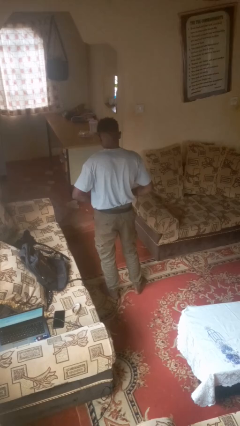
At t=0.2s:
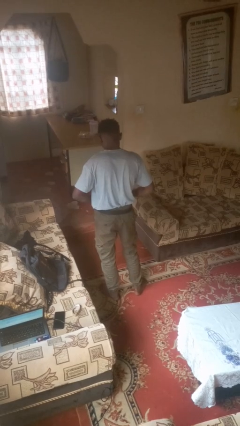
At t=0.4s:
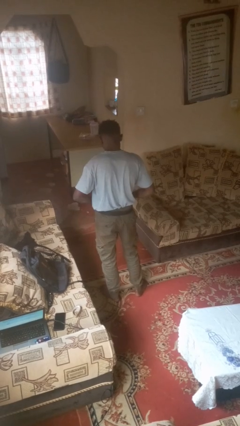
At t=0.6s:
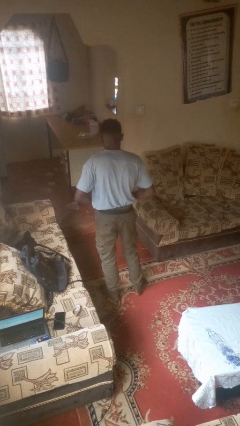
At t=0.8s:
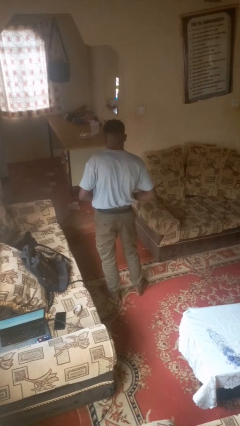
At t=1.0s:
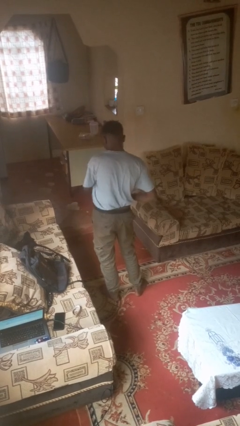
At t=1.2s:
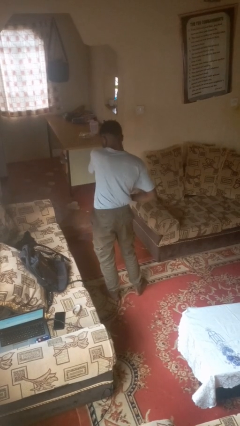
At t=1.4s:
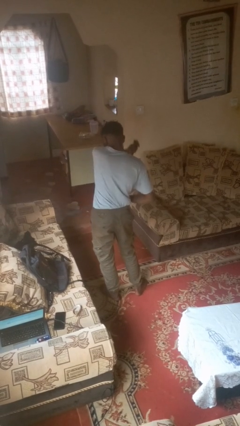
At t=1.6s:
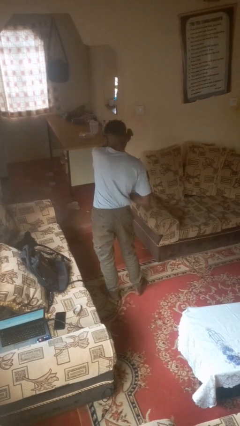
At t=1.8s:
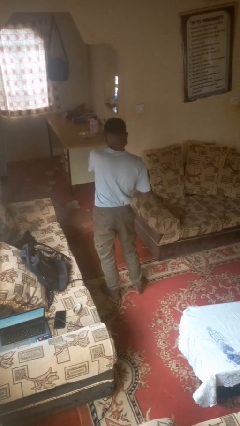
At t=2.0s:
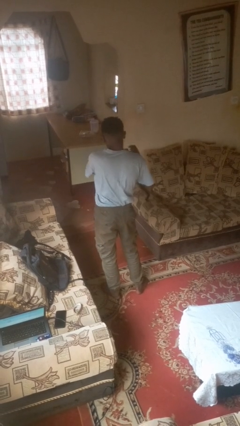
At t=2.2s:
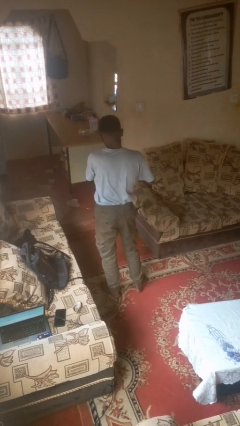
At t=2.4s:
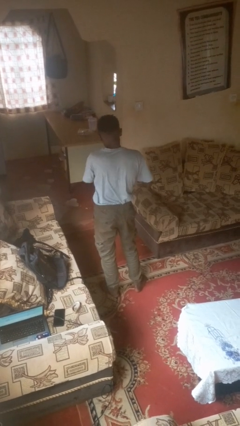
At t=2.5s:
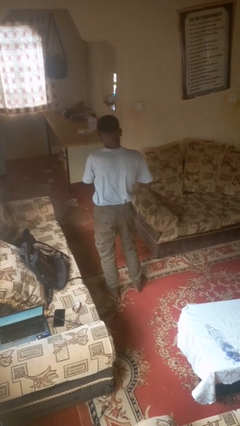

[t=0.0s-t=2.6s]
person takes off belt

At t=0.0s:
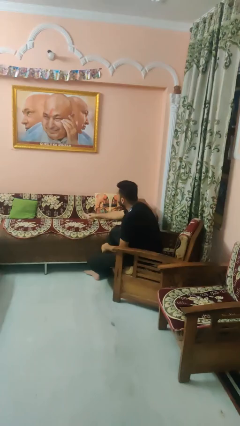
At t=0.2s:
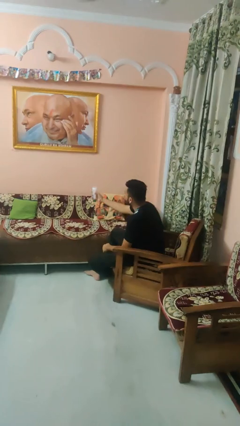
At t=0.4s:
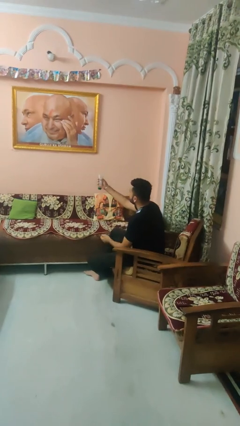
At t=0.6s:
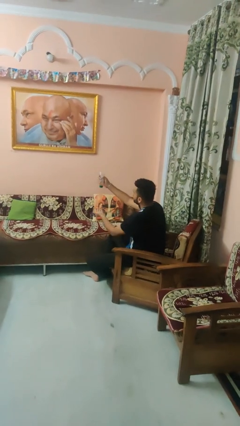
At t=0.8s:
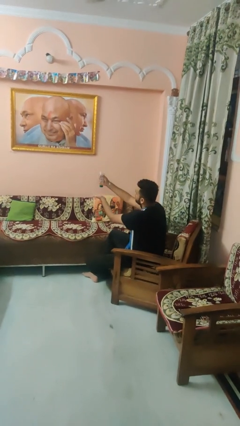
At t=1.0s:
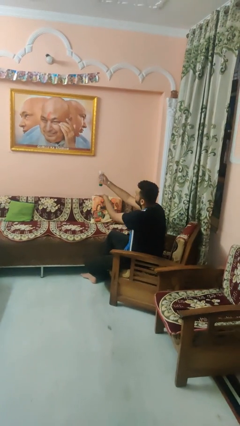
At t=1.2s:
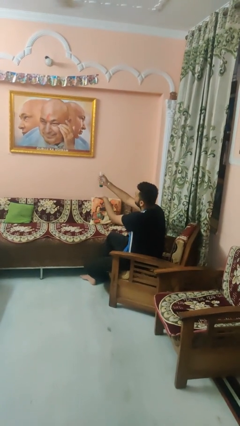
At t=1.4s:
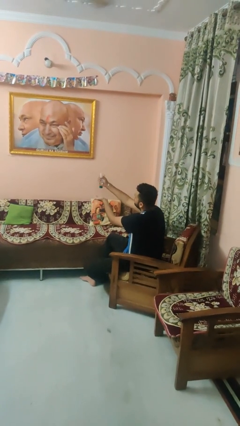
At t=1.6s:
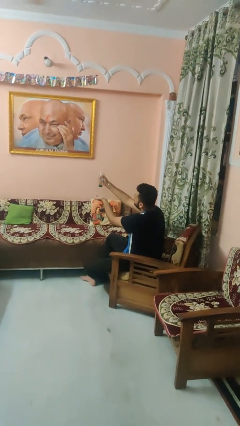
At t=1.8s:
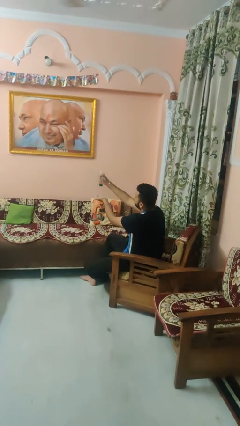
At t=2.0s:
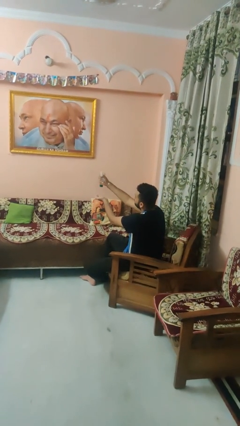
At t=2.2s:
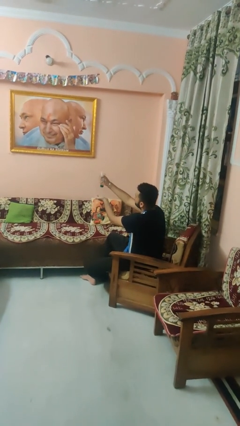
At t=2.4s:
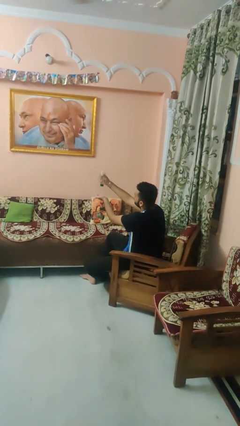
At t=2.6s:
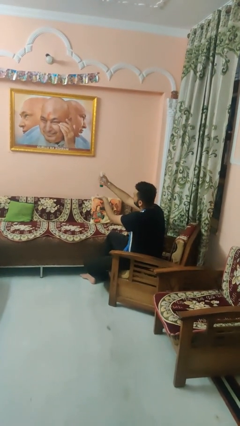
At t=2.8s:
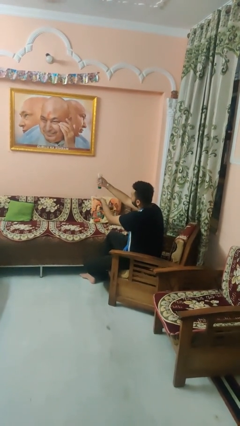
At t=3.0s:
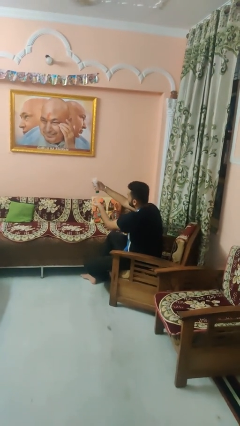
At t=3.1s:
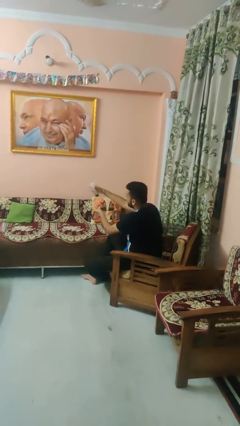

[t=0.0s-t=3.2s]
person squeezes object

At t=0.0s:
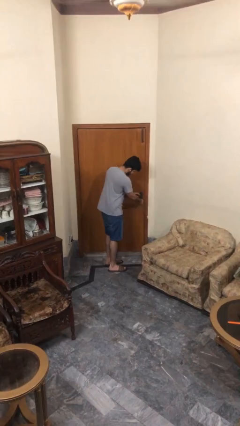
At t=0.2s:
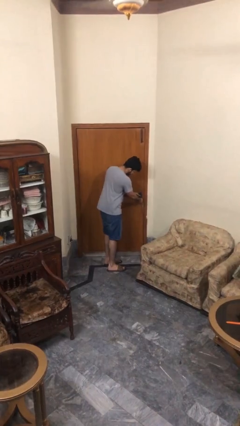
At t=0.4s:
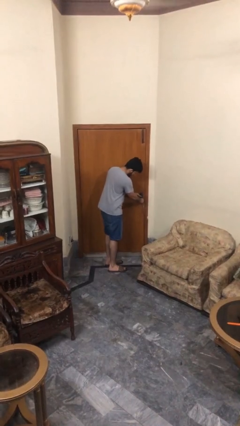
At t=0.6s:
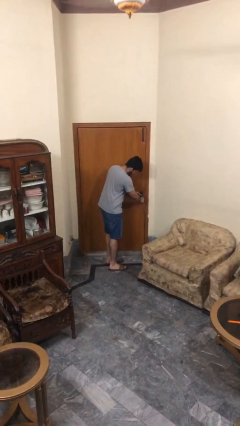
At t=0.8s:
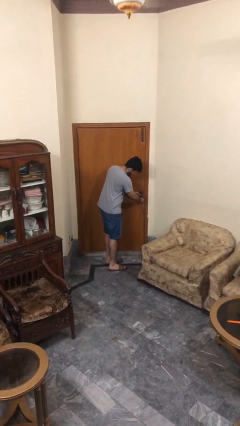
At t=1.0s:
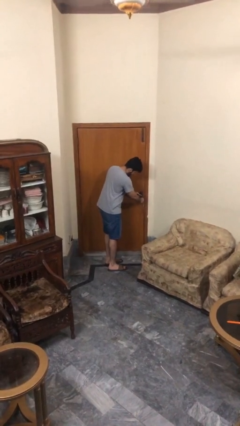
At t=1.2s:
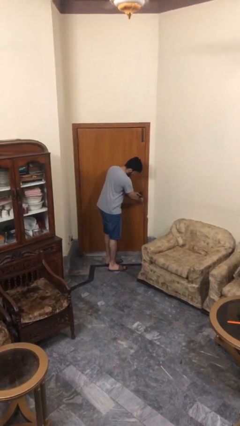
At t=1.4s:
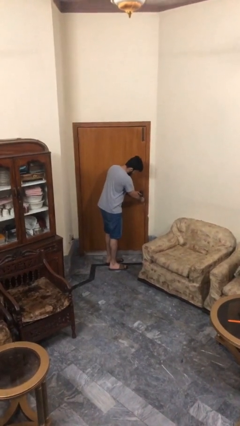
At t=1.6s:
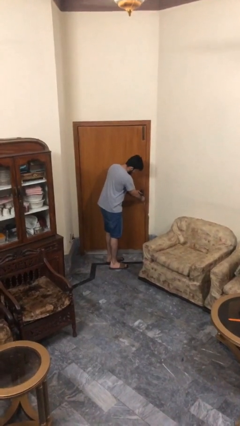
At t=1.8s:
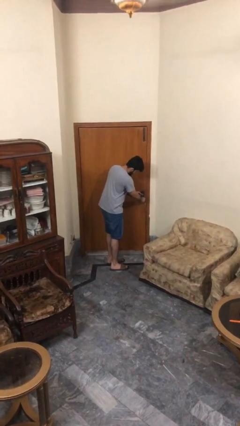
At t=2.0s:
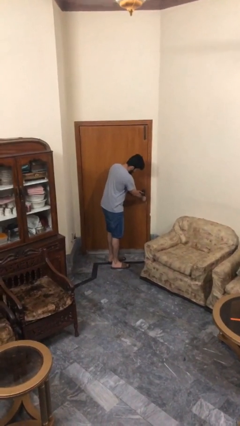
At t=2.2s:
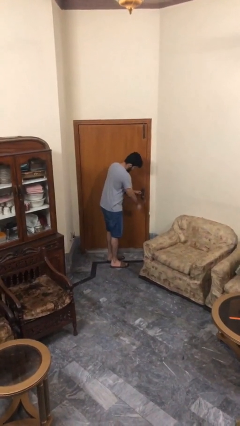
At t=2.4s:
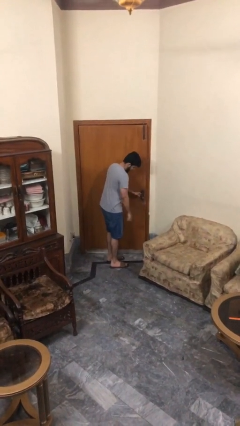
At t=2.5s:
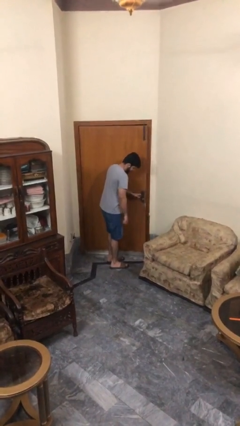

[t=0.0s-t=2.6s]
person unlocks door with keys

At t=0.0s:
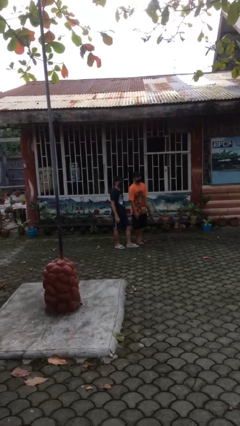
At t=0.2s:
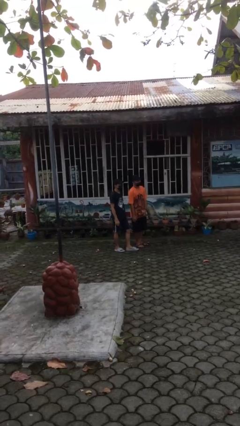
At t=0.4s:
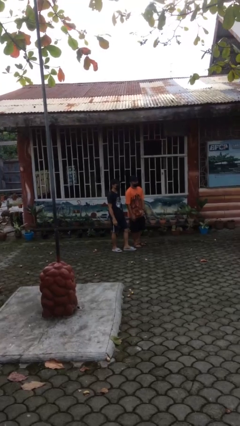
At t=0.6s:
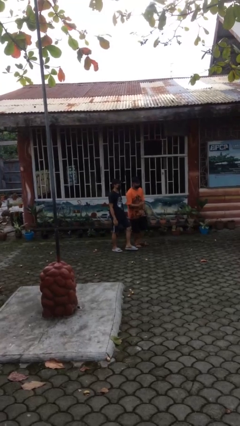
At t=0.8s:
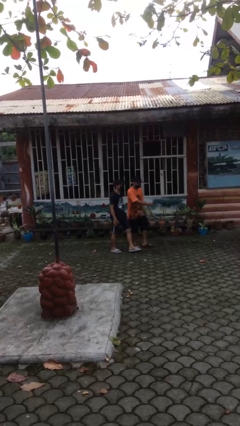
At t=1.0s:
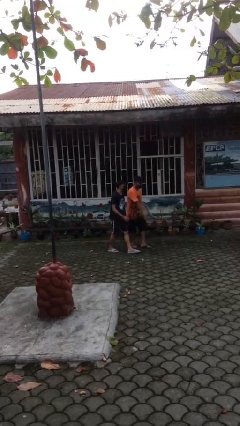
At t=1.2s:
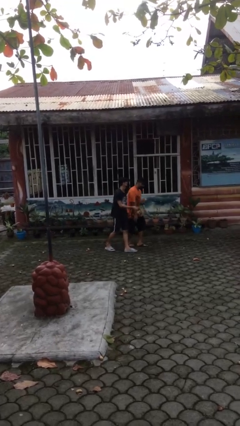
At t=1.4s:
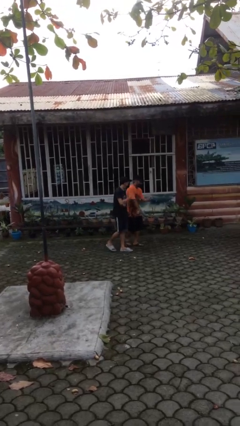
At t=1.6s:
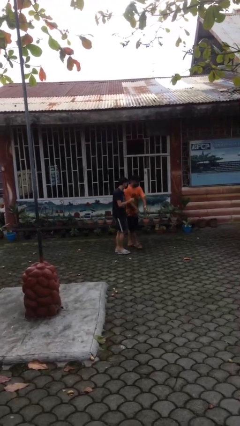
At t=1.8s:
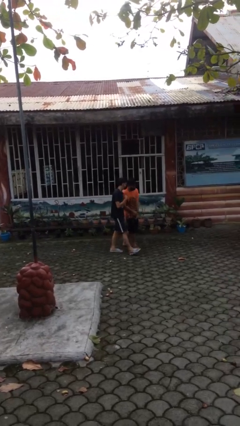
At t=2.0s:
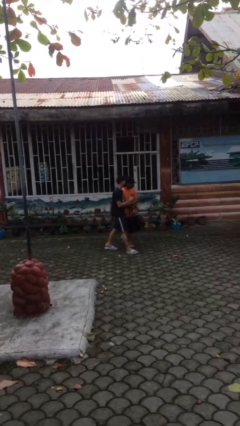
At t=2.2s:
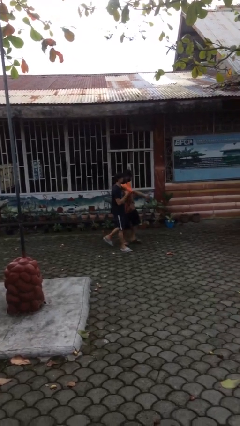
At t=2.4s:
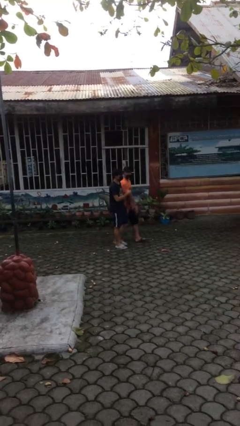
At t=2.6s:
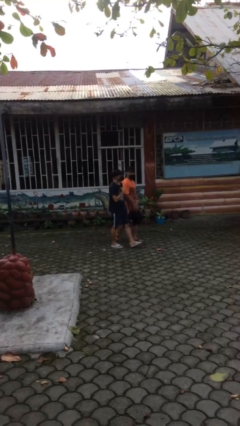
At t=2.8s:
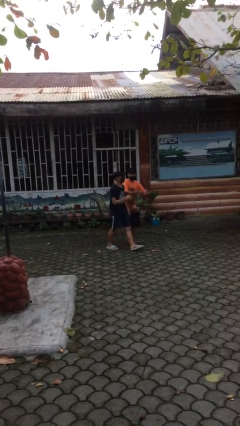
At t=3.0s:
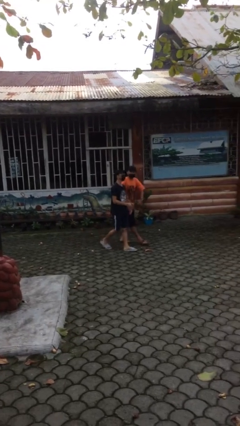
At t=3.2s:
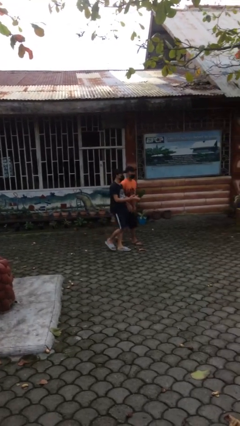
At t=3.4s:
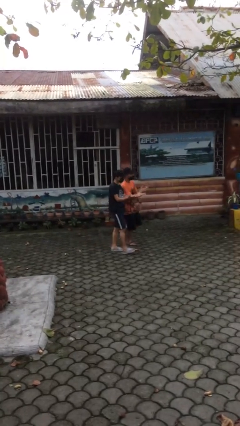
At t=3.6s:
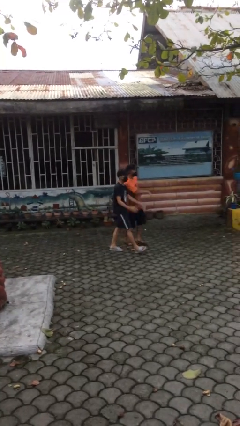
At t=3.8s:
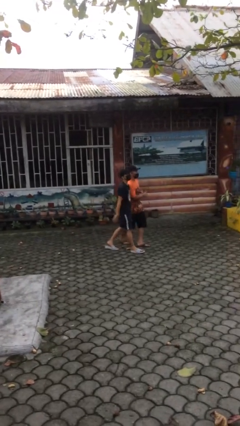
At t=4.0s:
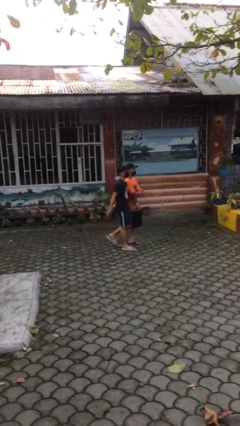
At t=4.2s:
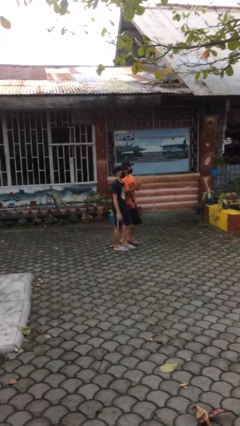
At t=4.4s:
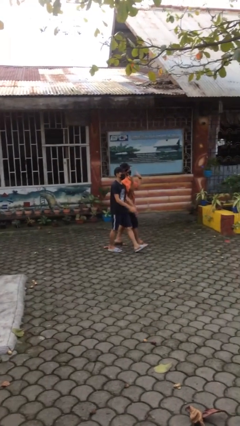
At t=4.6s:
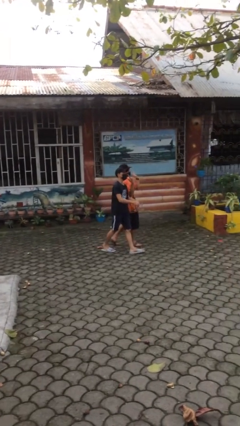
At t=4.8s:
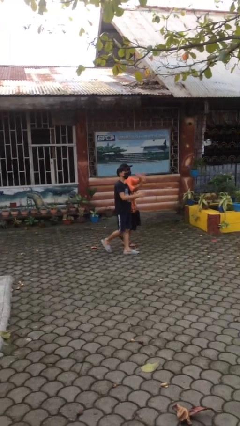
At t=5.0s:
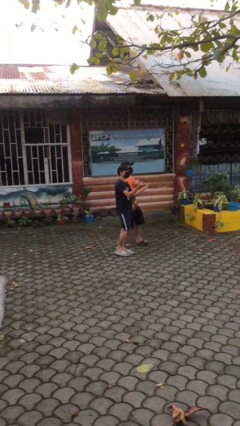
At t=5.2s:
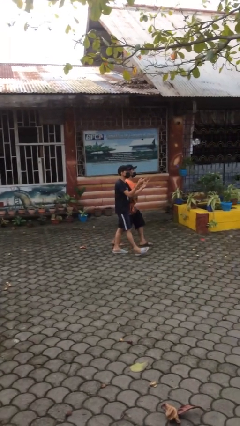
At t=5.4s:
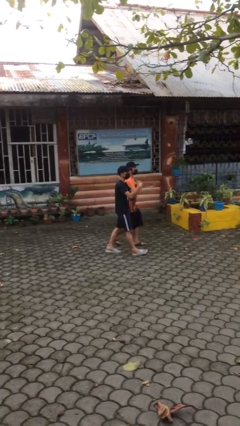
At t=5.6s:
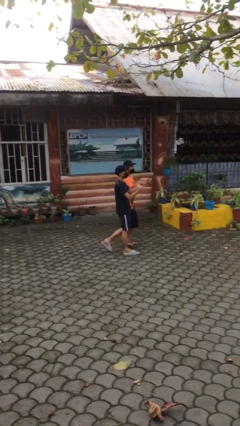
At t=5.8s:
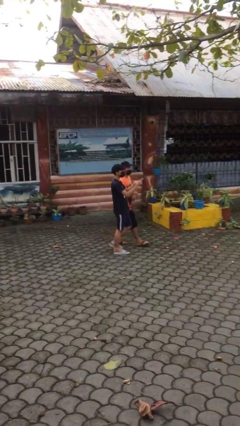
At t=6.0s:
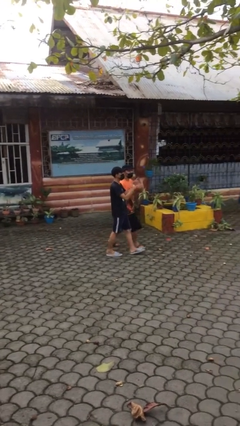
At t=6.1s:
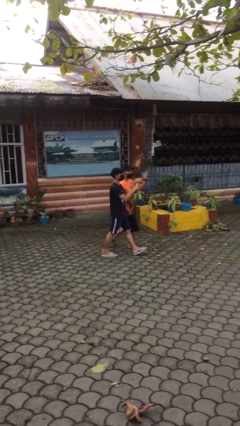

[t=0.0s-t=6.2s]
person talks to person

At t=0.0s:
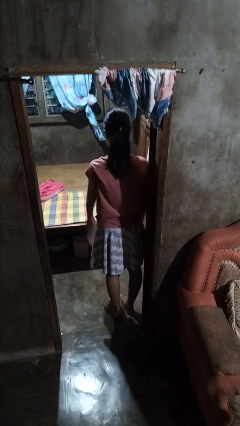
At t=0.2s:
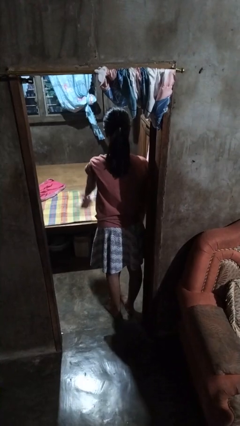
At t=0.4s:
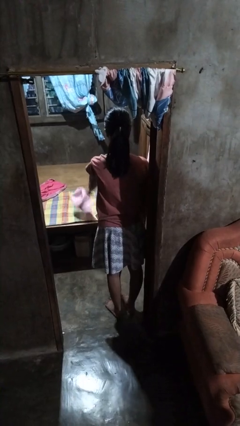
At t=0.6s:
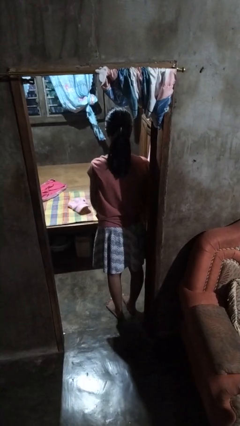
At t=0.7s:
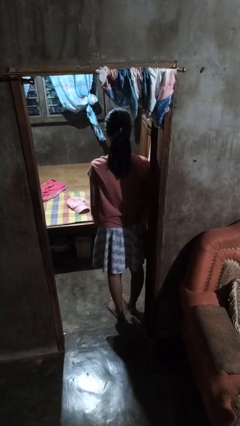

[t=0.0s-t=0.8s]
person throws object on bed

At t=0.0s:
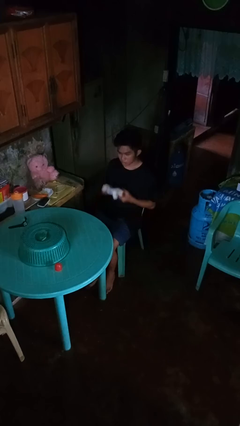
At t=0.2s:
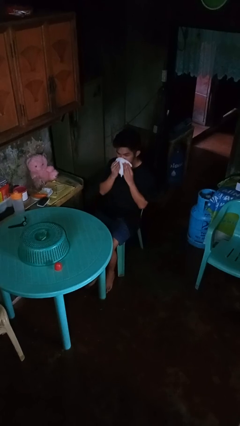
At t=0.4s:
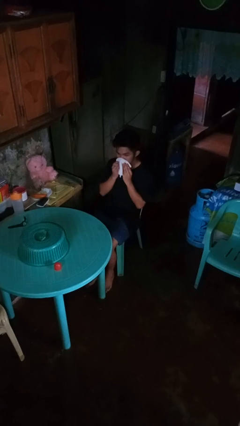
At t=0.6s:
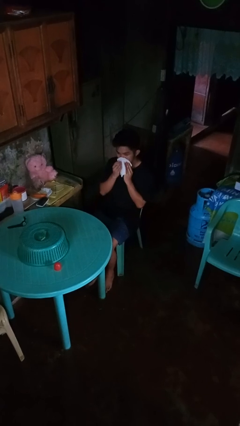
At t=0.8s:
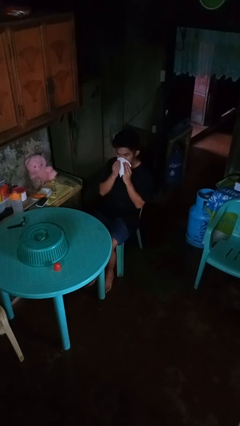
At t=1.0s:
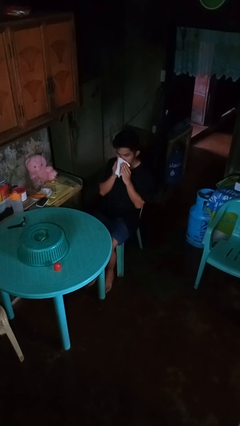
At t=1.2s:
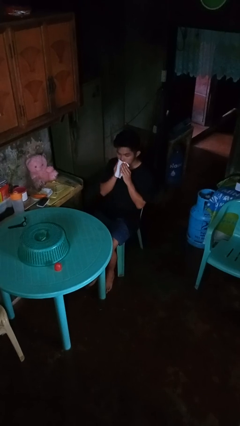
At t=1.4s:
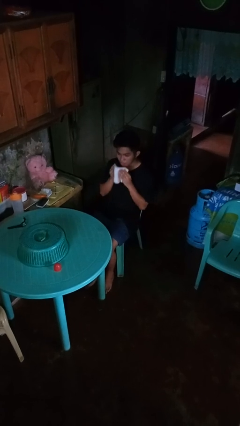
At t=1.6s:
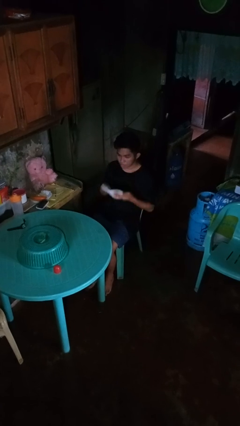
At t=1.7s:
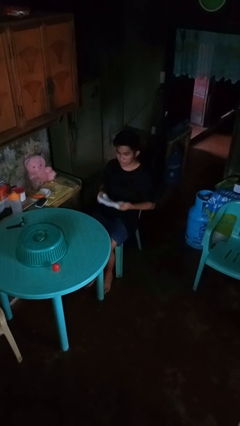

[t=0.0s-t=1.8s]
person wipes mouth with napkin
